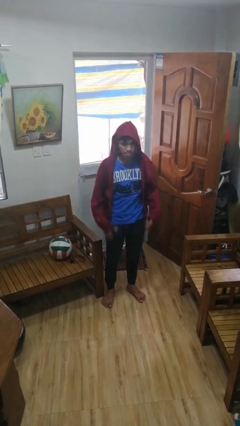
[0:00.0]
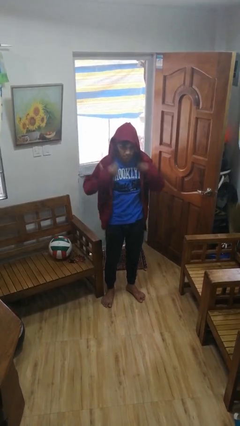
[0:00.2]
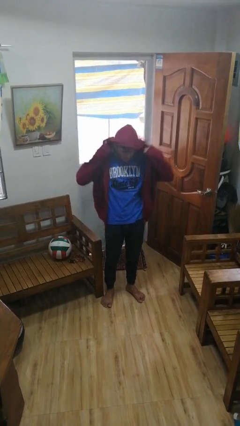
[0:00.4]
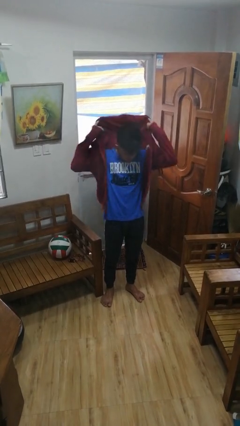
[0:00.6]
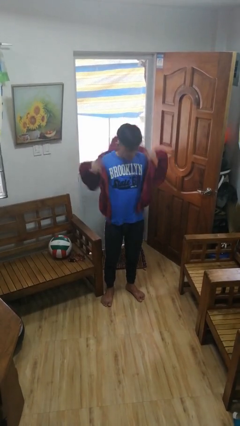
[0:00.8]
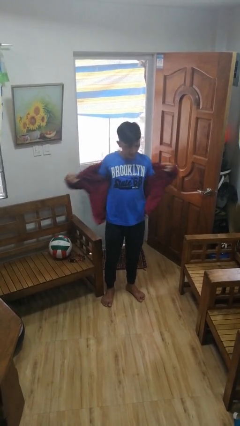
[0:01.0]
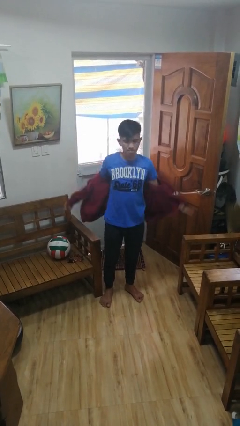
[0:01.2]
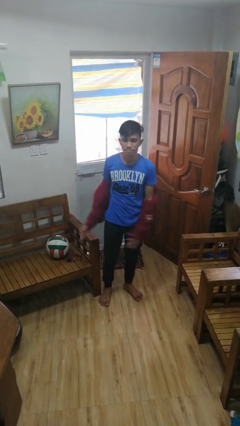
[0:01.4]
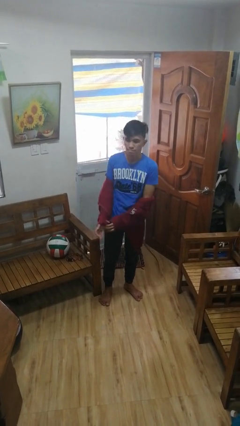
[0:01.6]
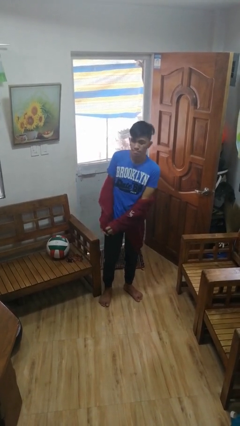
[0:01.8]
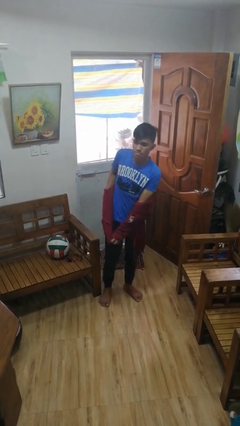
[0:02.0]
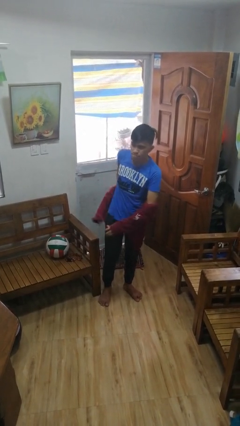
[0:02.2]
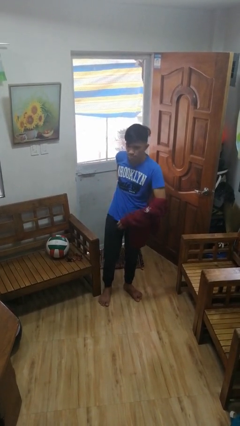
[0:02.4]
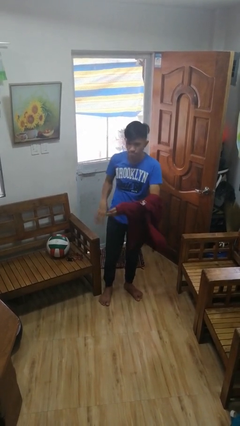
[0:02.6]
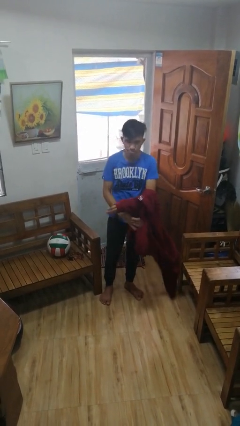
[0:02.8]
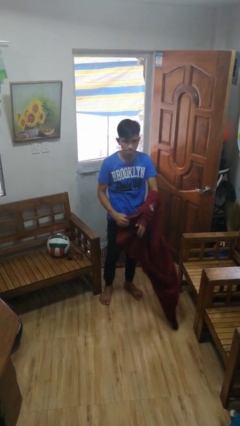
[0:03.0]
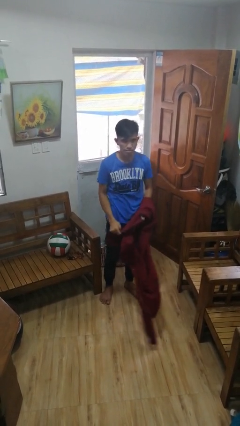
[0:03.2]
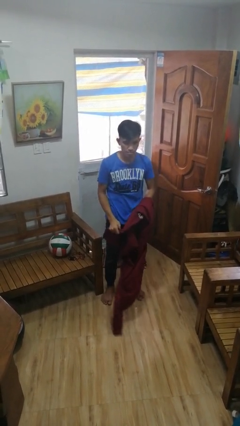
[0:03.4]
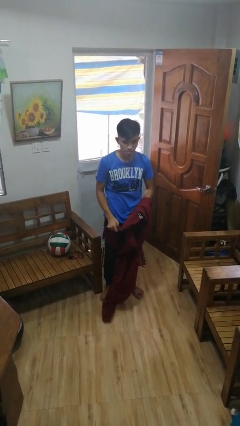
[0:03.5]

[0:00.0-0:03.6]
person takes off hoodie

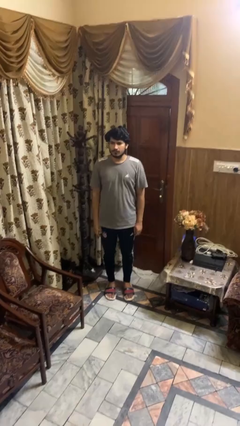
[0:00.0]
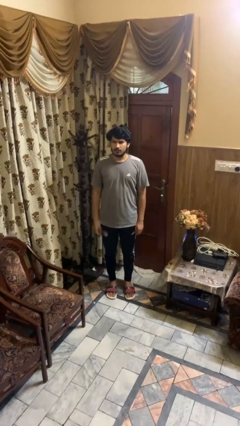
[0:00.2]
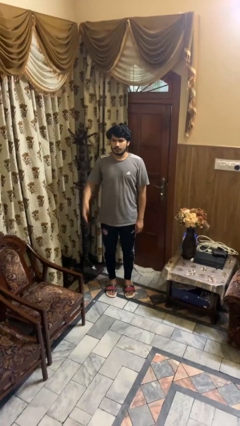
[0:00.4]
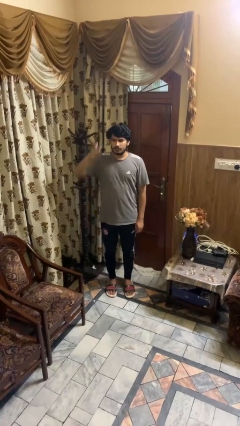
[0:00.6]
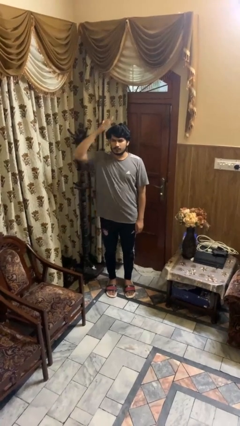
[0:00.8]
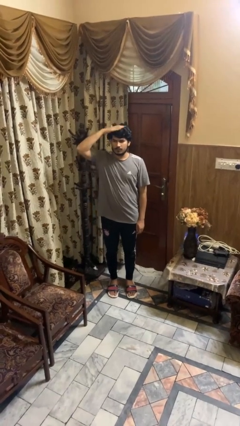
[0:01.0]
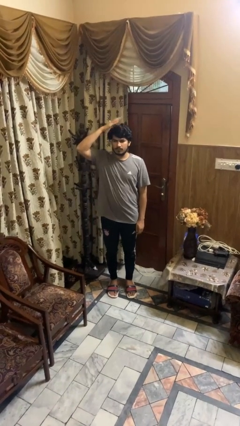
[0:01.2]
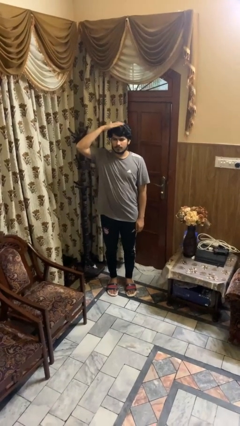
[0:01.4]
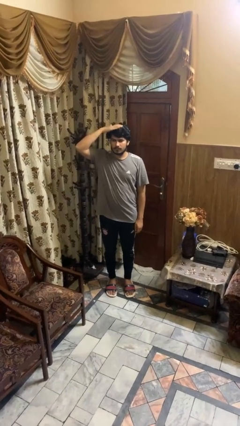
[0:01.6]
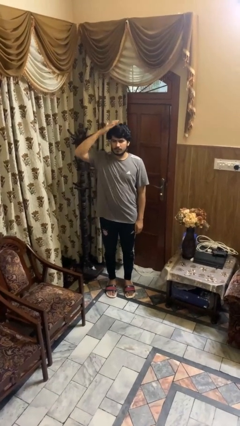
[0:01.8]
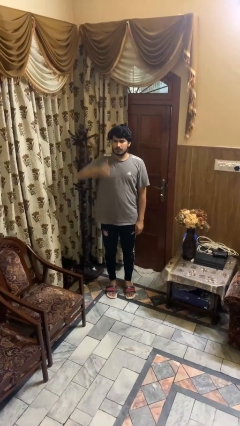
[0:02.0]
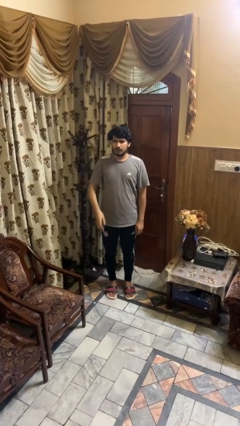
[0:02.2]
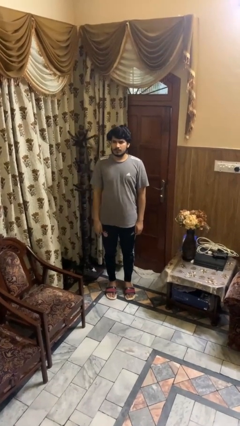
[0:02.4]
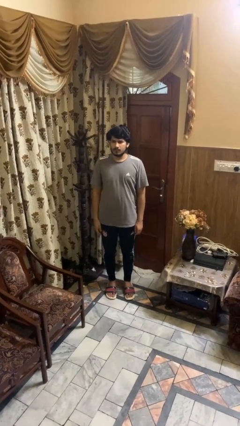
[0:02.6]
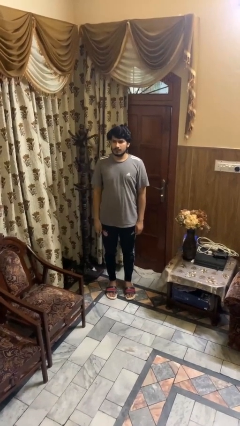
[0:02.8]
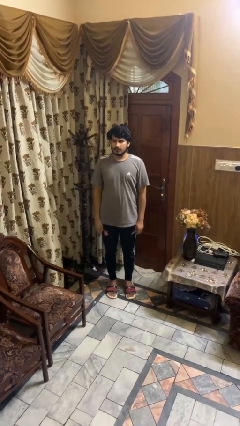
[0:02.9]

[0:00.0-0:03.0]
person pats head

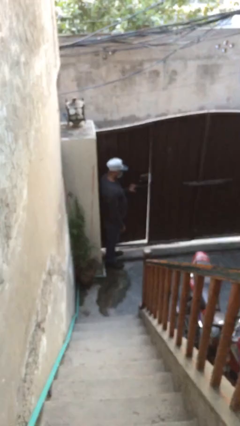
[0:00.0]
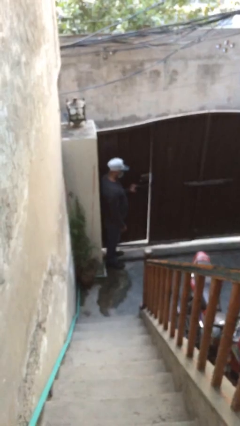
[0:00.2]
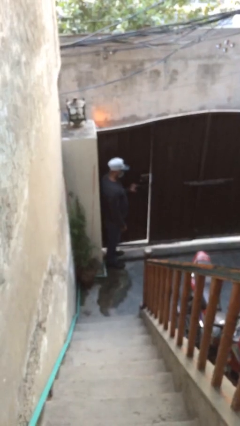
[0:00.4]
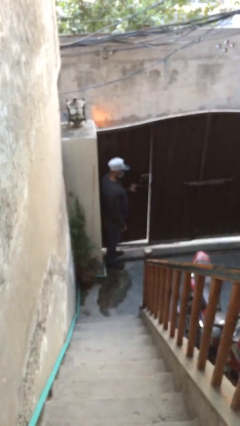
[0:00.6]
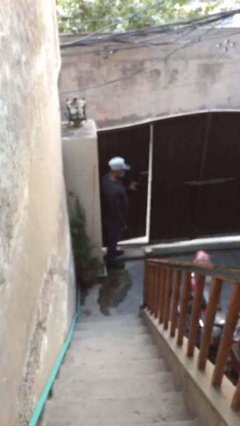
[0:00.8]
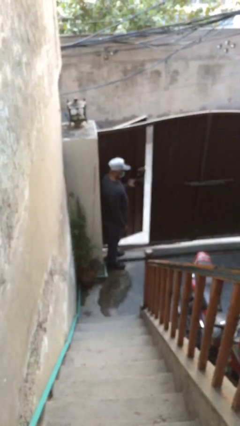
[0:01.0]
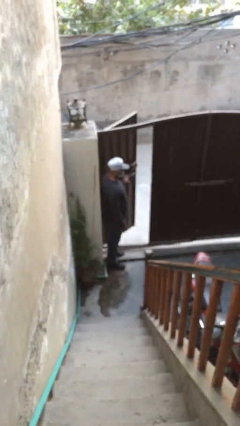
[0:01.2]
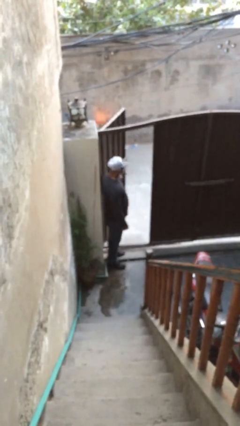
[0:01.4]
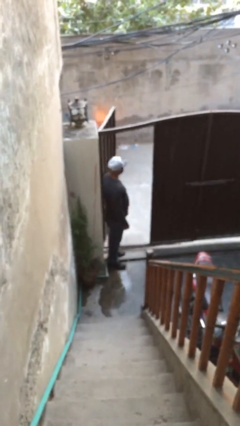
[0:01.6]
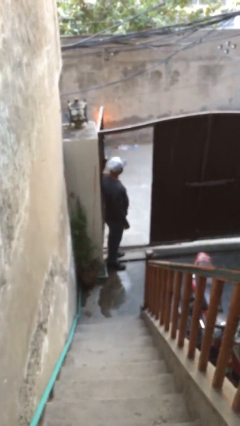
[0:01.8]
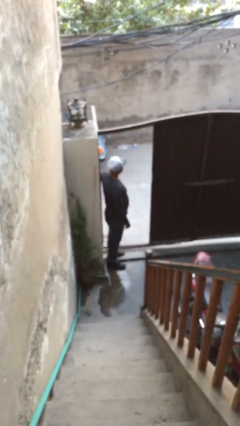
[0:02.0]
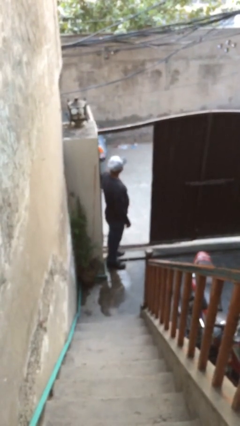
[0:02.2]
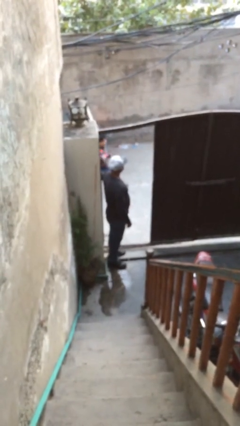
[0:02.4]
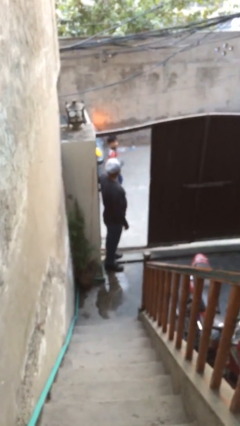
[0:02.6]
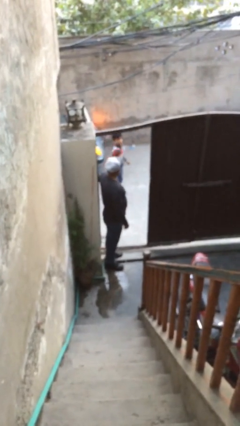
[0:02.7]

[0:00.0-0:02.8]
person opens facility door

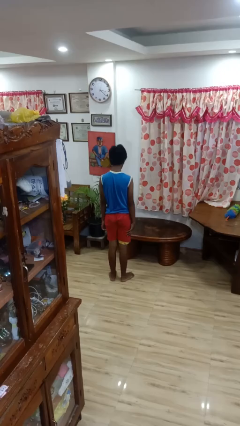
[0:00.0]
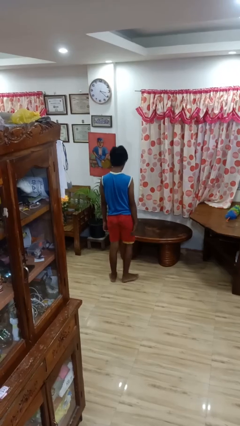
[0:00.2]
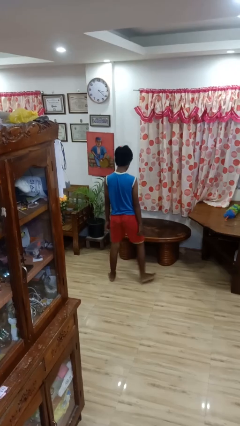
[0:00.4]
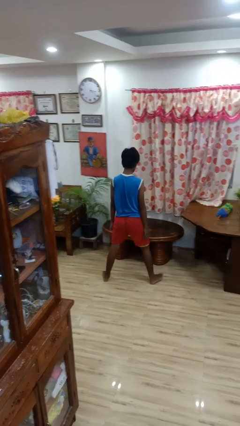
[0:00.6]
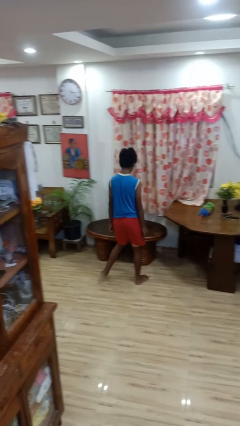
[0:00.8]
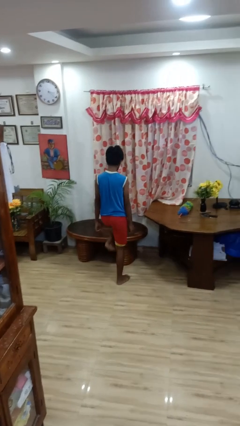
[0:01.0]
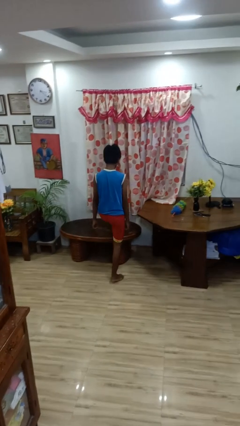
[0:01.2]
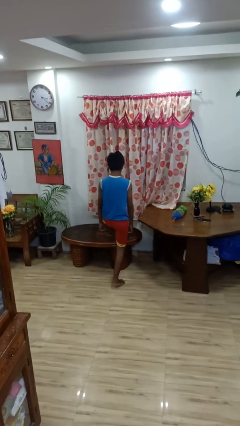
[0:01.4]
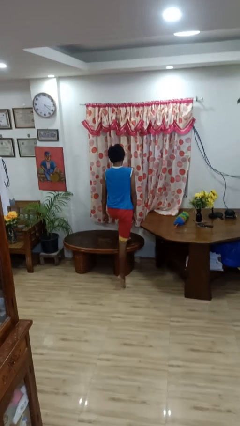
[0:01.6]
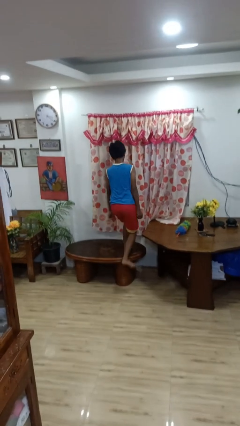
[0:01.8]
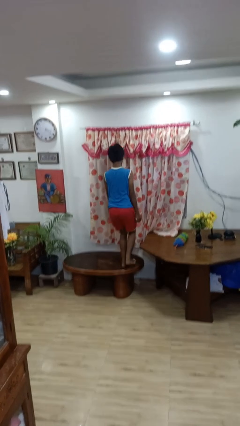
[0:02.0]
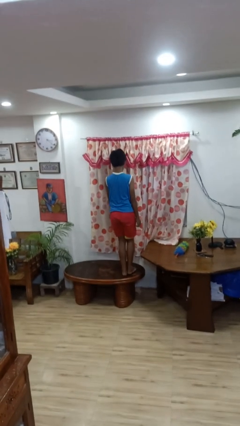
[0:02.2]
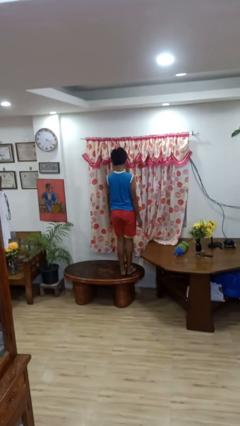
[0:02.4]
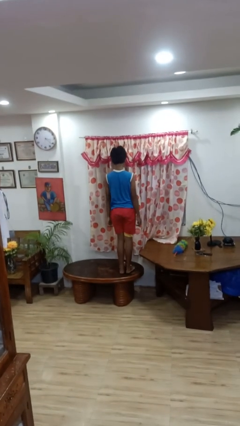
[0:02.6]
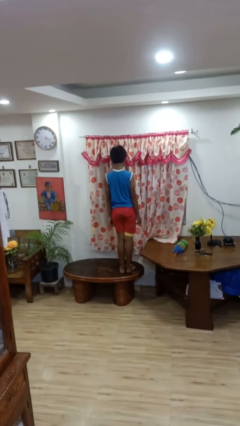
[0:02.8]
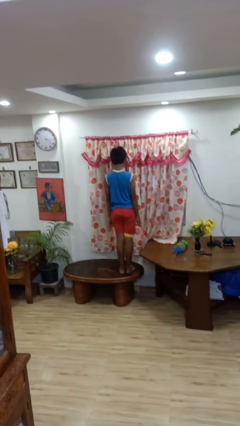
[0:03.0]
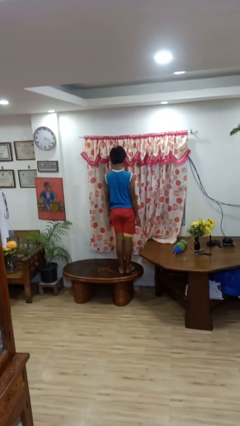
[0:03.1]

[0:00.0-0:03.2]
person climbs on table

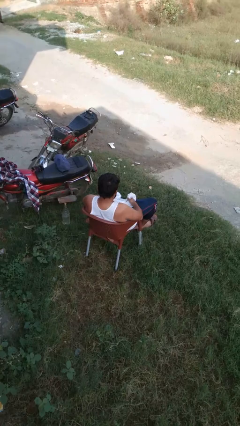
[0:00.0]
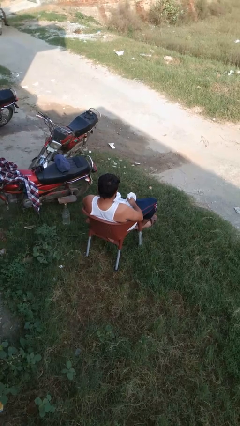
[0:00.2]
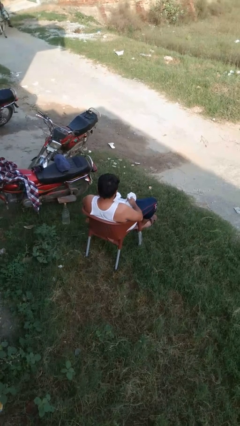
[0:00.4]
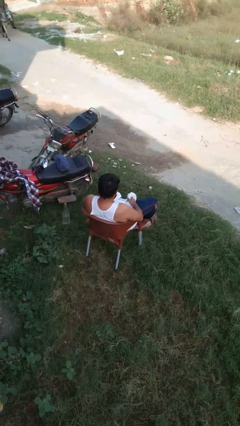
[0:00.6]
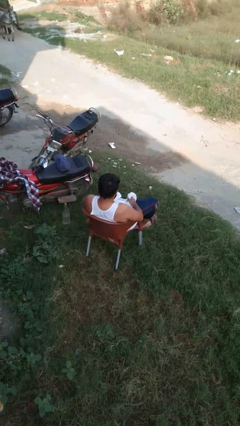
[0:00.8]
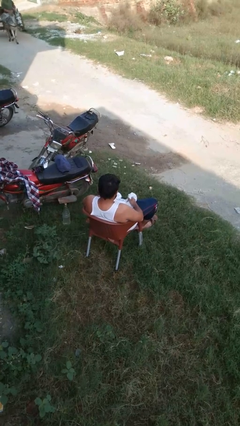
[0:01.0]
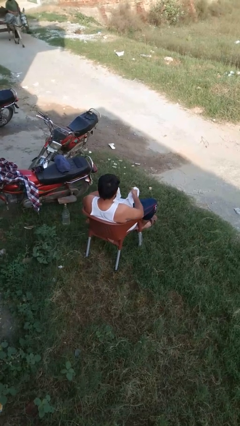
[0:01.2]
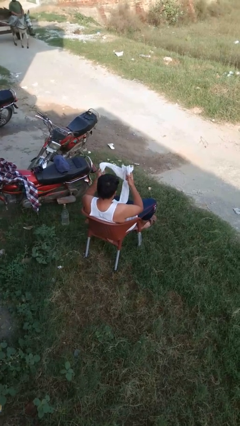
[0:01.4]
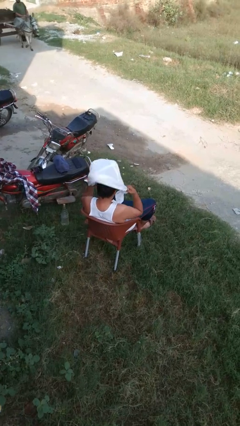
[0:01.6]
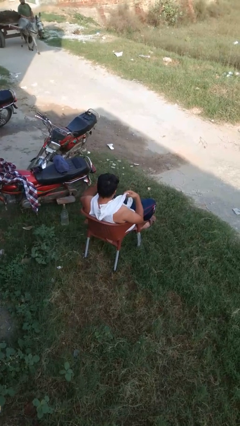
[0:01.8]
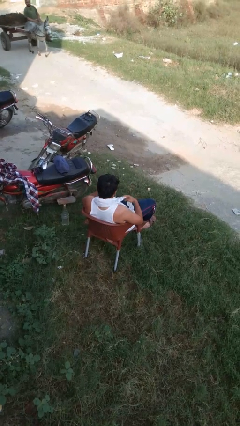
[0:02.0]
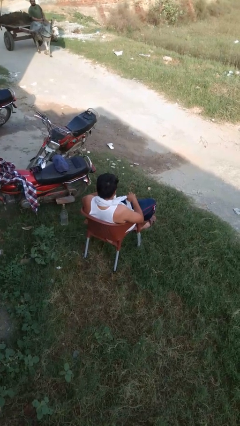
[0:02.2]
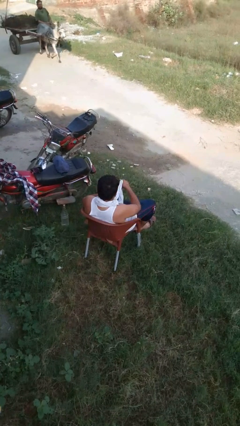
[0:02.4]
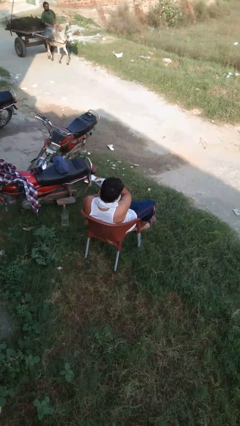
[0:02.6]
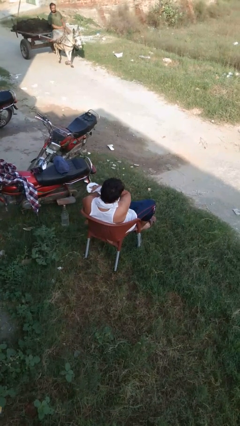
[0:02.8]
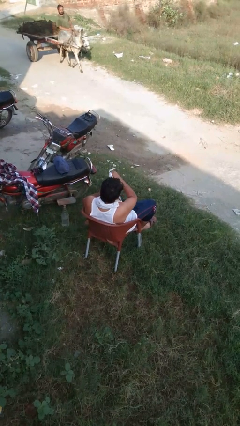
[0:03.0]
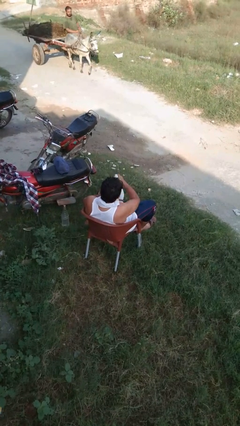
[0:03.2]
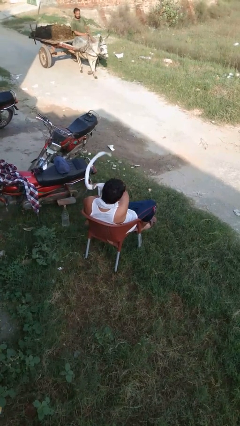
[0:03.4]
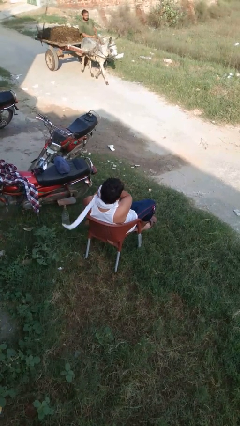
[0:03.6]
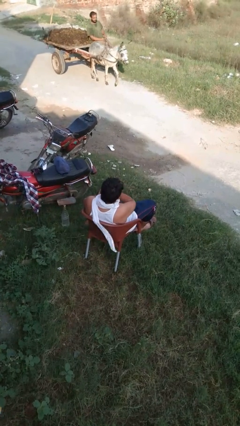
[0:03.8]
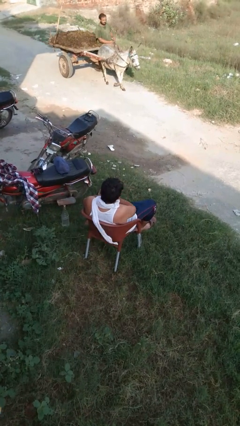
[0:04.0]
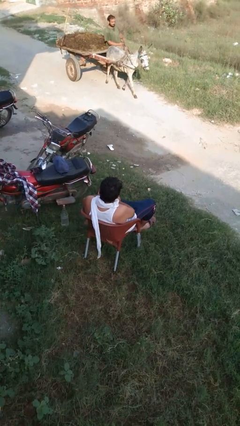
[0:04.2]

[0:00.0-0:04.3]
person puts on scarf

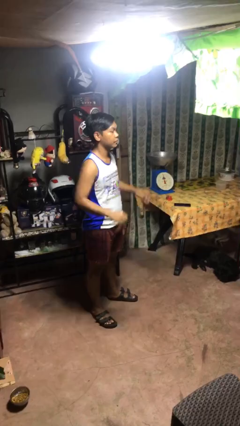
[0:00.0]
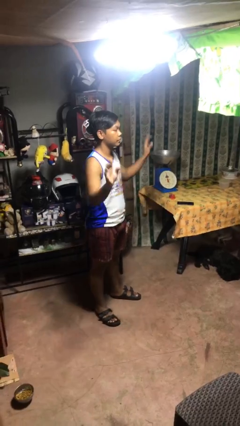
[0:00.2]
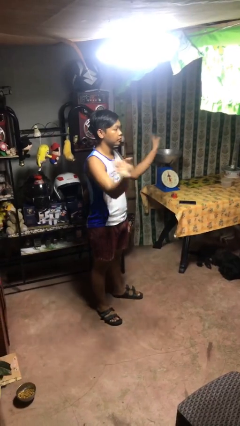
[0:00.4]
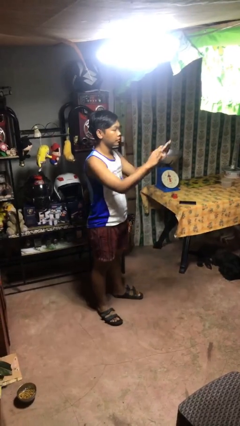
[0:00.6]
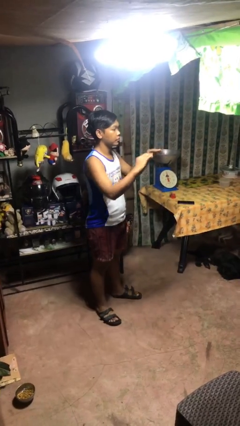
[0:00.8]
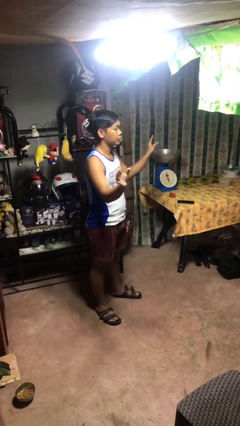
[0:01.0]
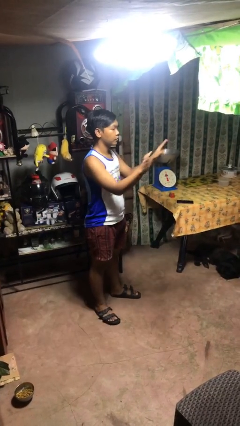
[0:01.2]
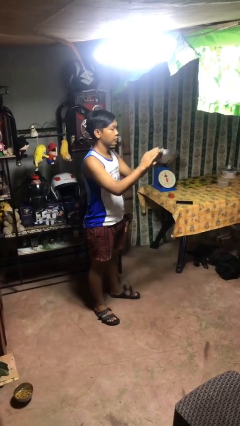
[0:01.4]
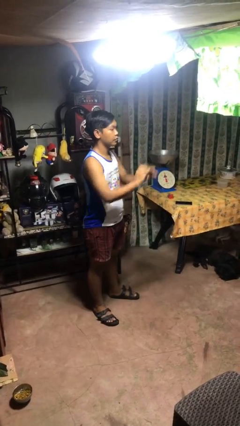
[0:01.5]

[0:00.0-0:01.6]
person gestures zoom out
